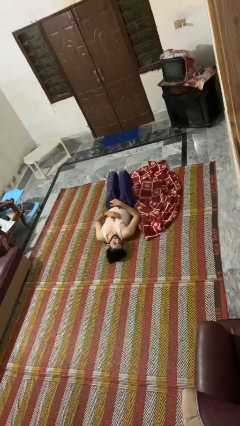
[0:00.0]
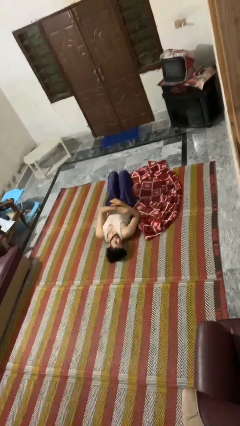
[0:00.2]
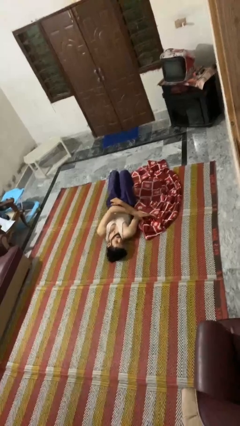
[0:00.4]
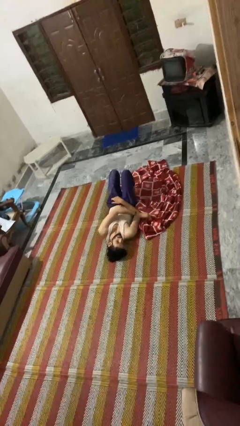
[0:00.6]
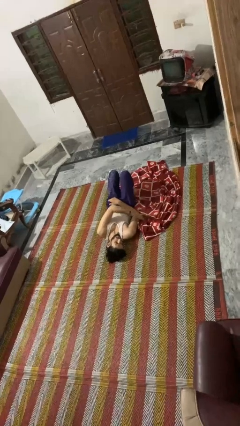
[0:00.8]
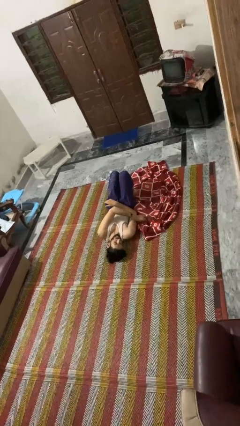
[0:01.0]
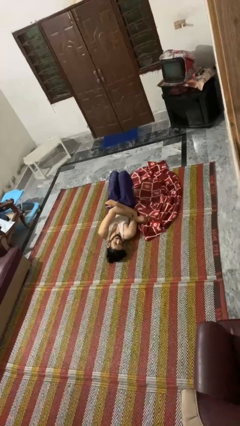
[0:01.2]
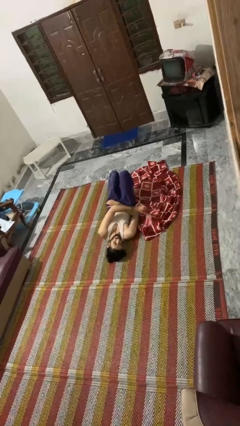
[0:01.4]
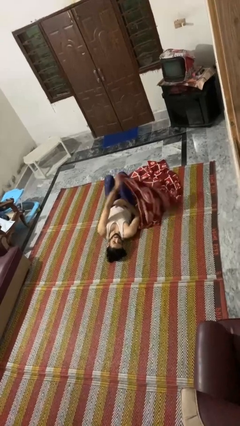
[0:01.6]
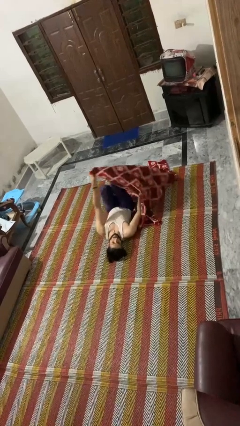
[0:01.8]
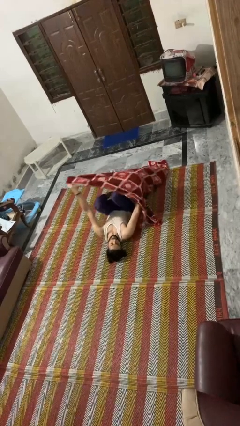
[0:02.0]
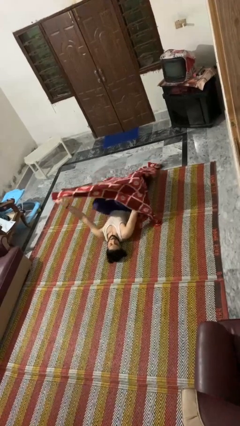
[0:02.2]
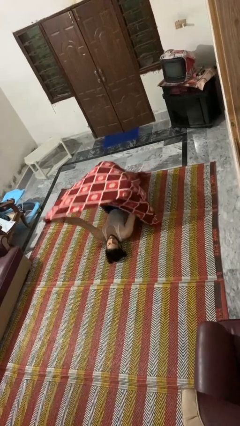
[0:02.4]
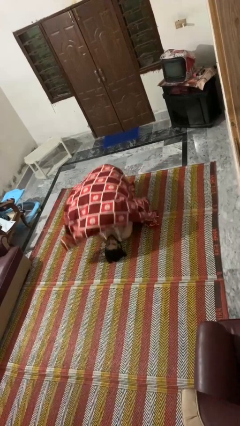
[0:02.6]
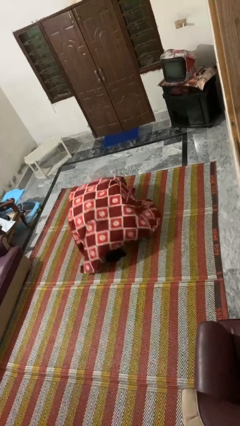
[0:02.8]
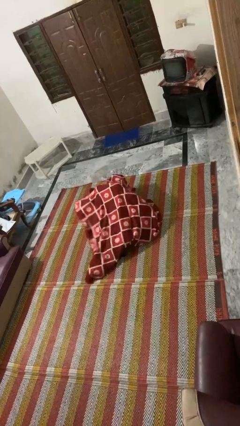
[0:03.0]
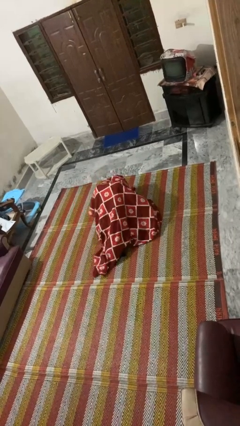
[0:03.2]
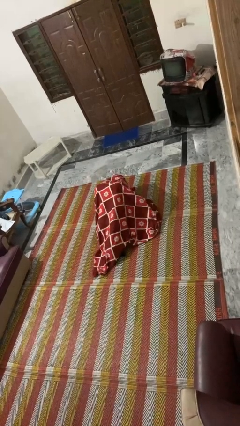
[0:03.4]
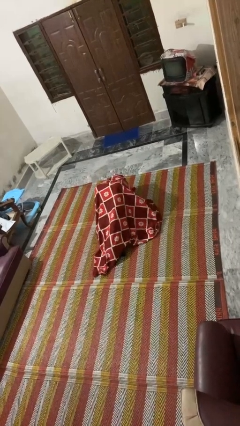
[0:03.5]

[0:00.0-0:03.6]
person covers with blanket

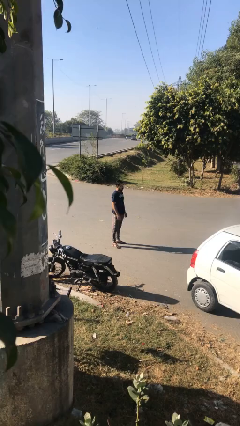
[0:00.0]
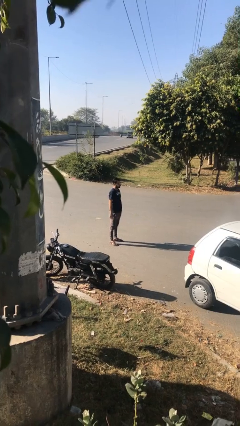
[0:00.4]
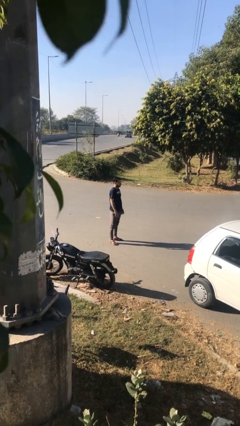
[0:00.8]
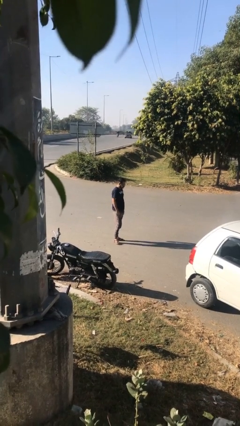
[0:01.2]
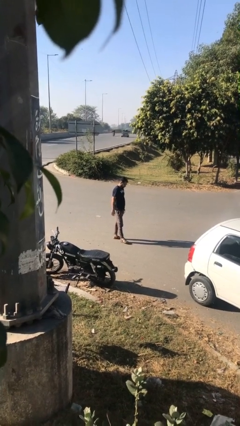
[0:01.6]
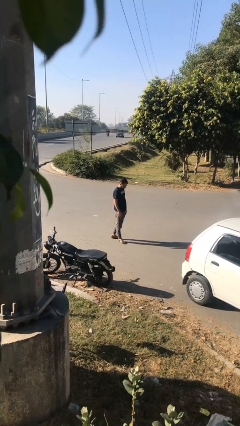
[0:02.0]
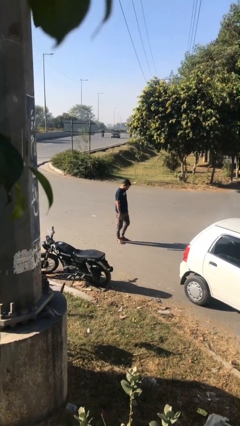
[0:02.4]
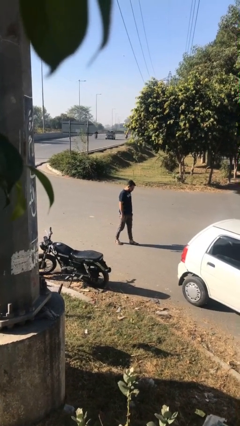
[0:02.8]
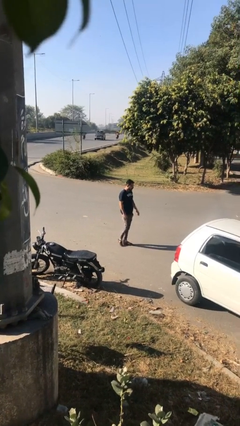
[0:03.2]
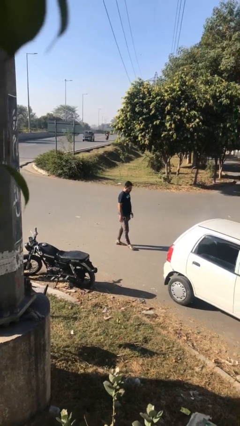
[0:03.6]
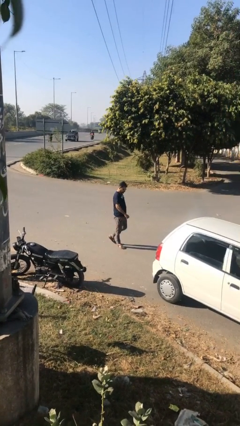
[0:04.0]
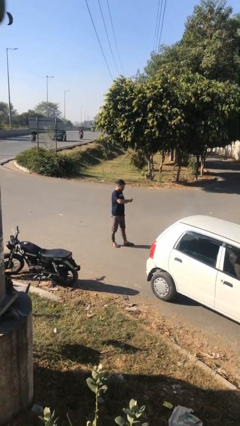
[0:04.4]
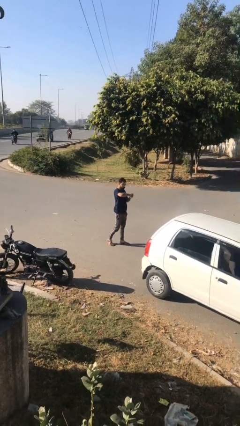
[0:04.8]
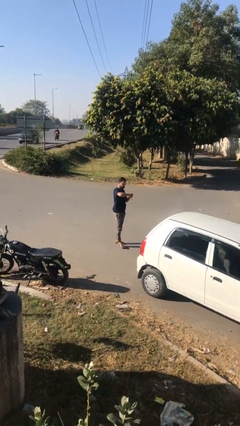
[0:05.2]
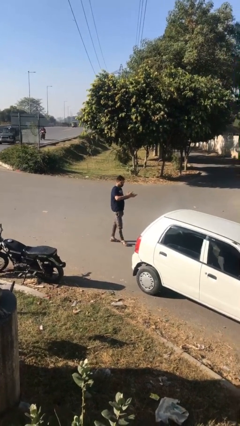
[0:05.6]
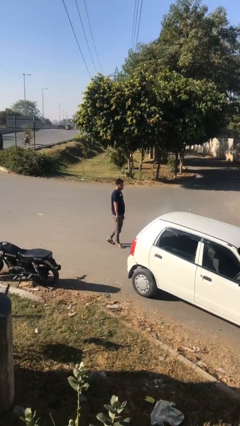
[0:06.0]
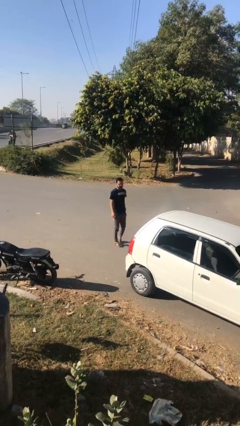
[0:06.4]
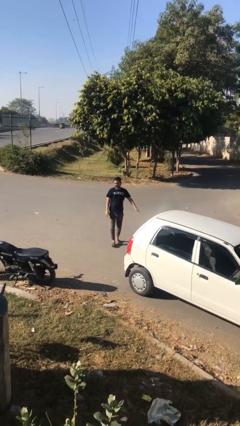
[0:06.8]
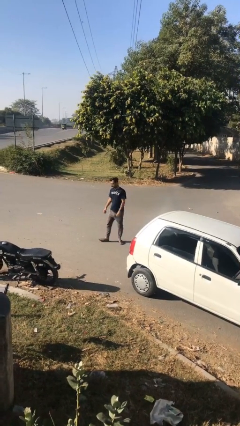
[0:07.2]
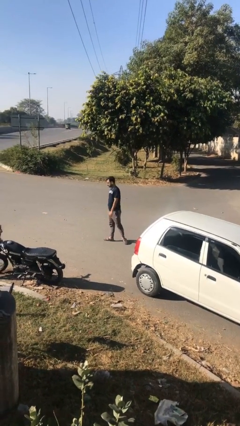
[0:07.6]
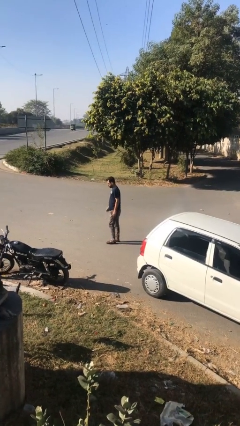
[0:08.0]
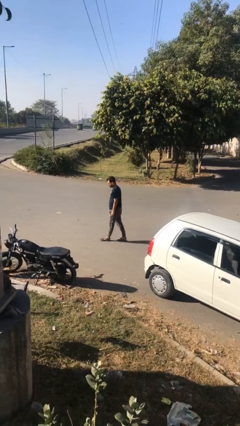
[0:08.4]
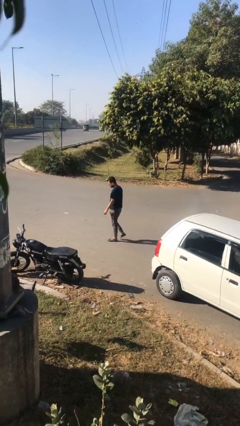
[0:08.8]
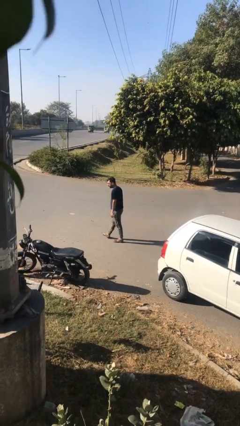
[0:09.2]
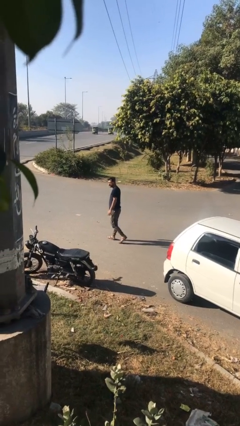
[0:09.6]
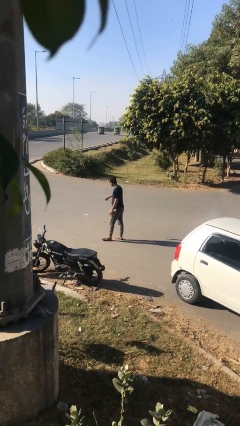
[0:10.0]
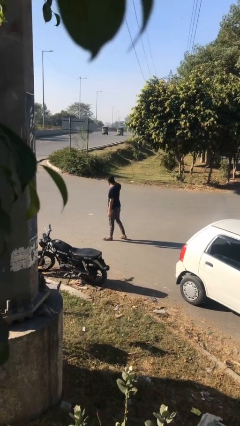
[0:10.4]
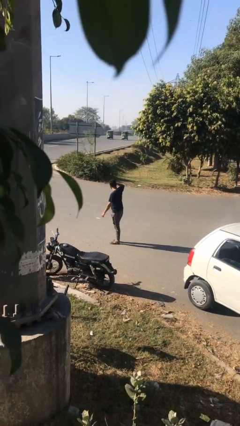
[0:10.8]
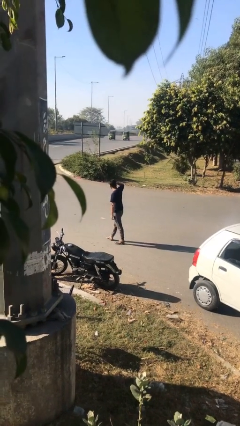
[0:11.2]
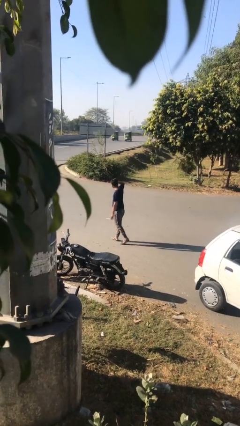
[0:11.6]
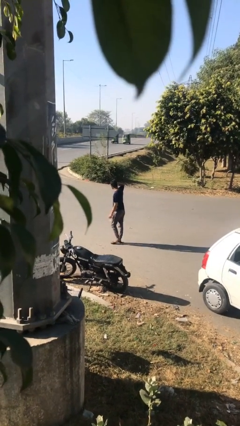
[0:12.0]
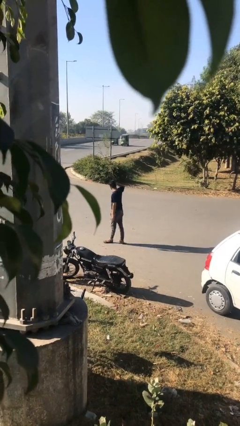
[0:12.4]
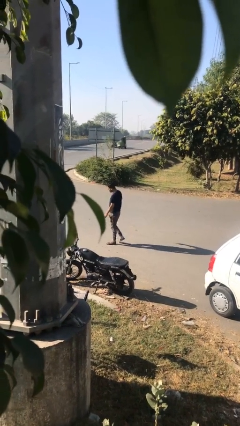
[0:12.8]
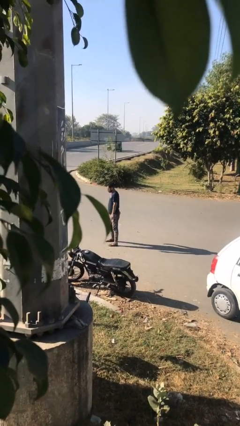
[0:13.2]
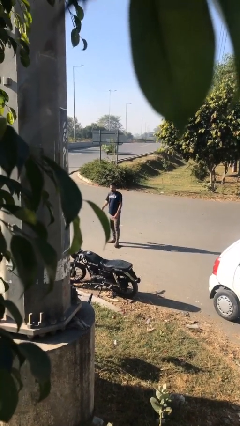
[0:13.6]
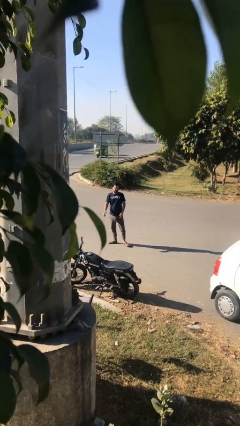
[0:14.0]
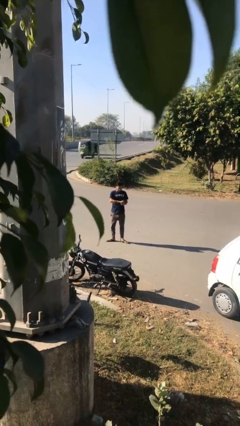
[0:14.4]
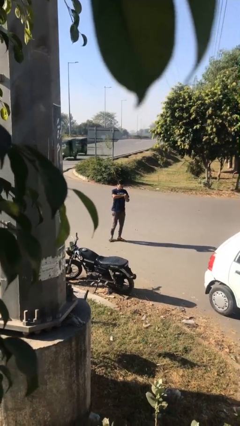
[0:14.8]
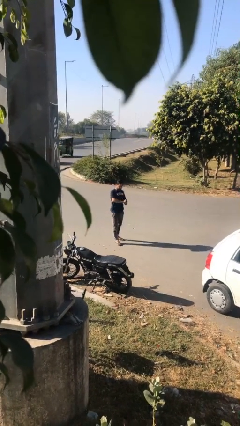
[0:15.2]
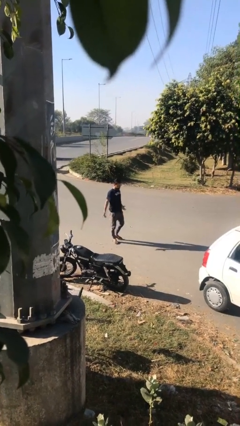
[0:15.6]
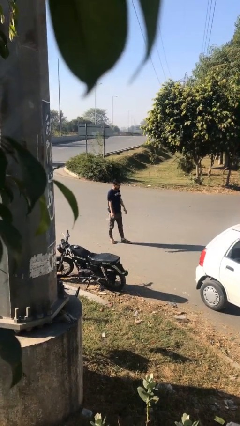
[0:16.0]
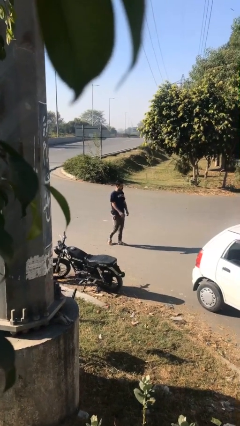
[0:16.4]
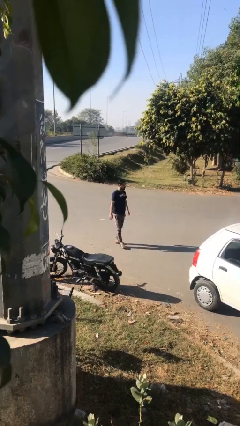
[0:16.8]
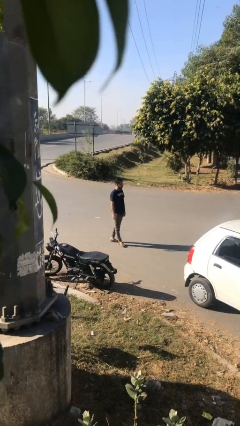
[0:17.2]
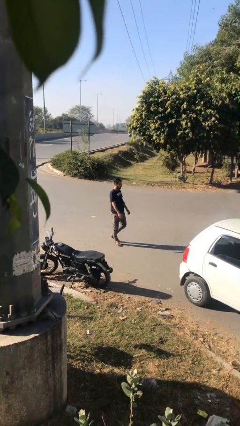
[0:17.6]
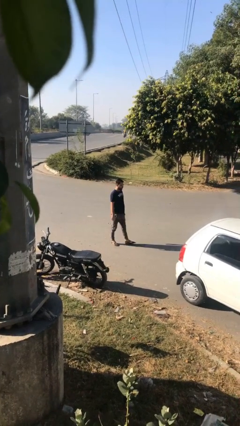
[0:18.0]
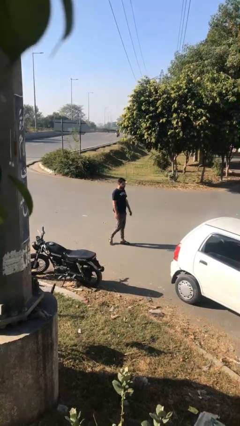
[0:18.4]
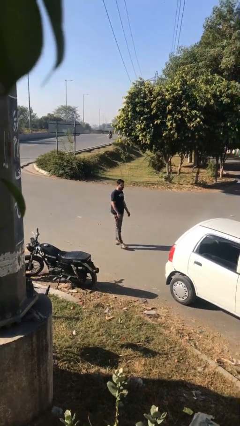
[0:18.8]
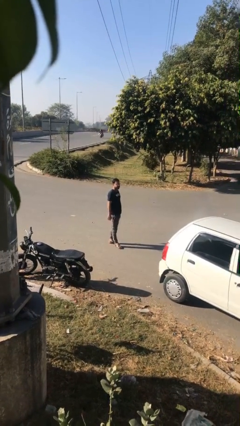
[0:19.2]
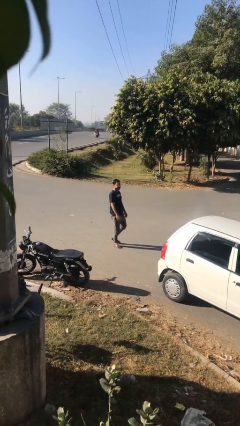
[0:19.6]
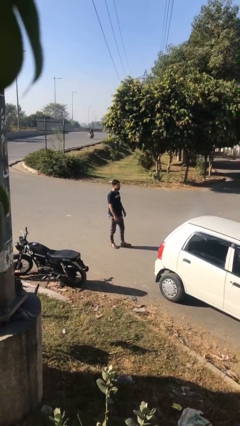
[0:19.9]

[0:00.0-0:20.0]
person walks

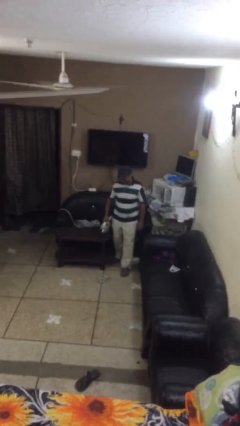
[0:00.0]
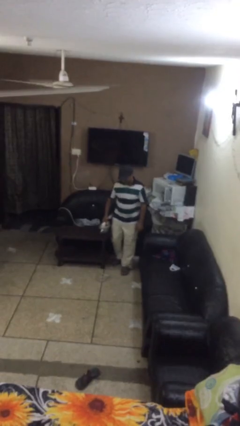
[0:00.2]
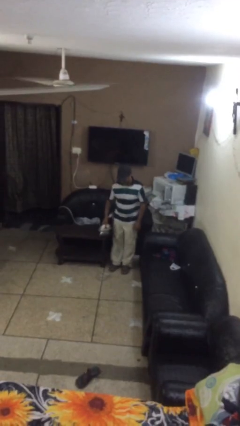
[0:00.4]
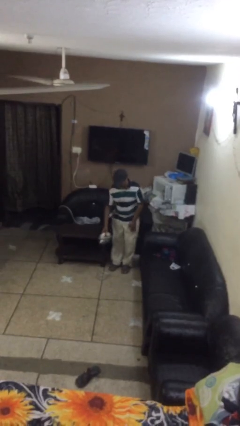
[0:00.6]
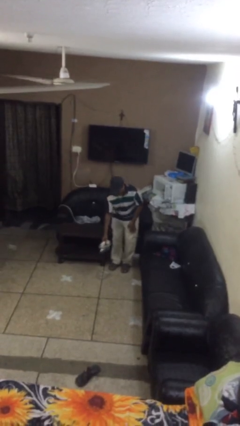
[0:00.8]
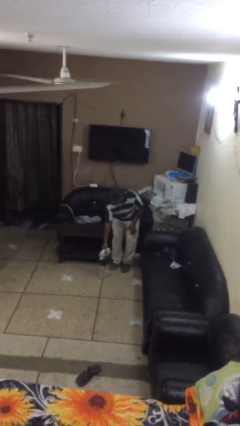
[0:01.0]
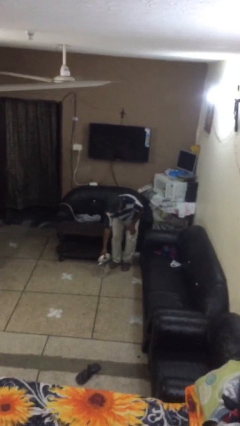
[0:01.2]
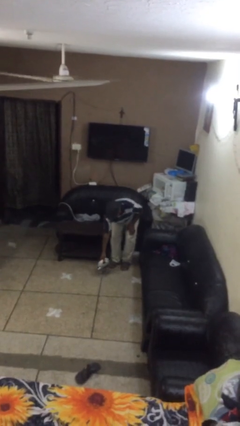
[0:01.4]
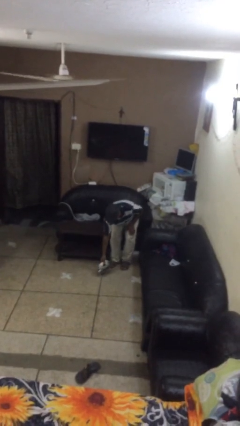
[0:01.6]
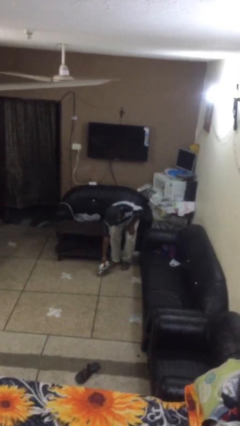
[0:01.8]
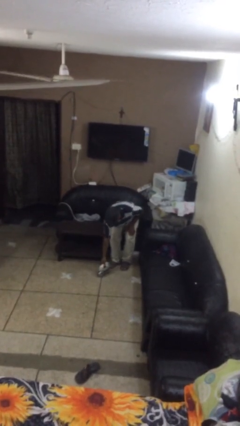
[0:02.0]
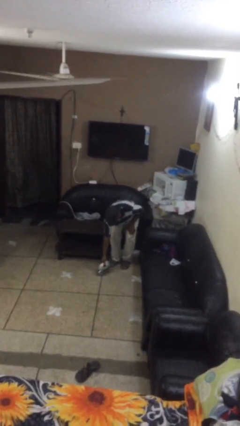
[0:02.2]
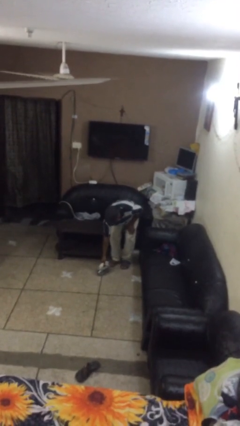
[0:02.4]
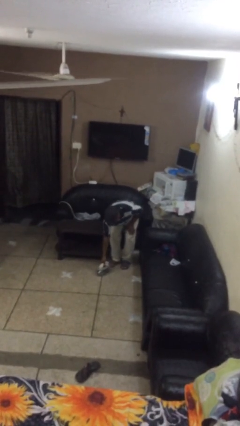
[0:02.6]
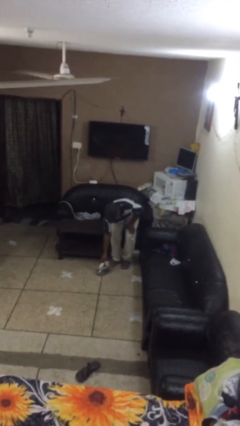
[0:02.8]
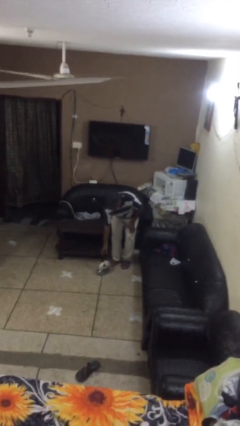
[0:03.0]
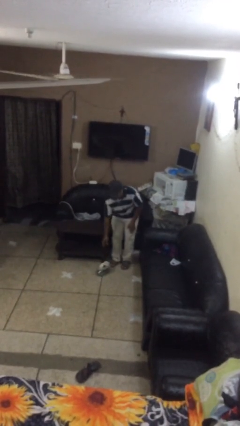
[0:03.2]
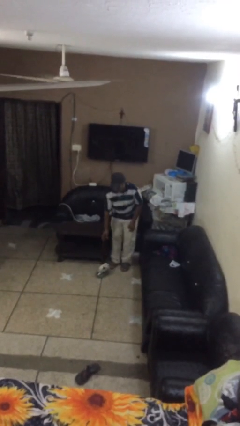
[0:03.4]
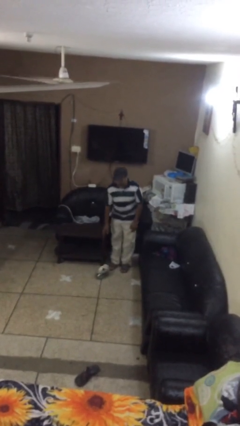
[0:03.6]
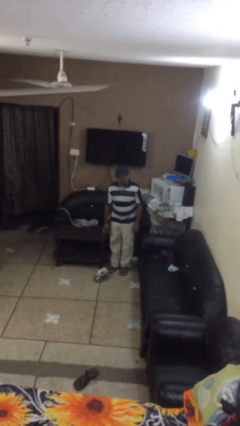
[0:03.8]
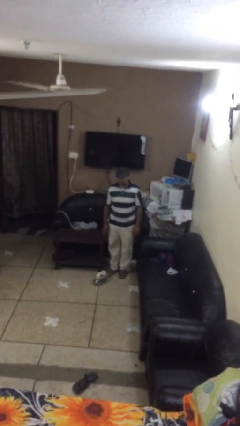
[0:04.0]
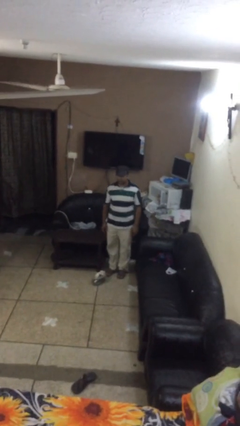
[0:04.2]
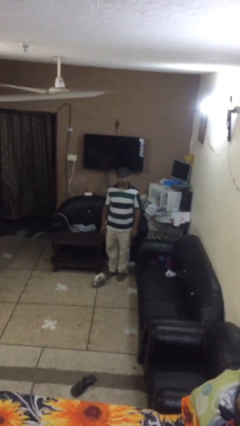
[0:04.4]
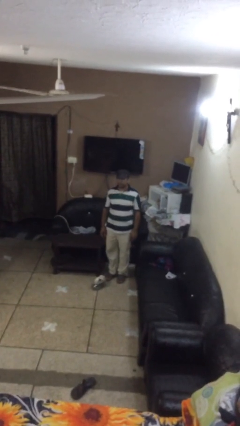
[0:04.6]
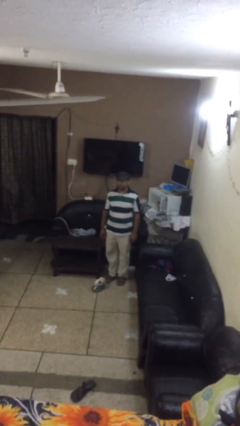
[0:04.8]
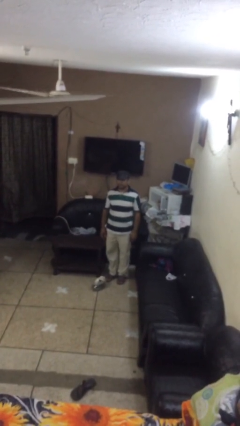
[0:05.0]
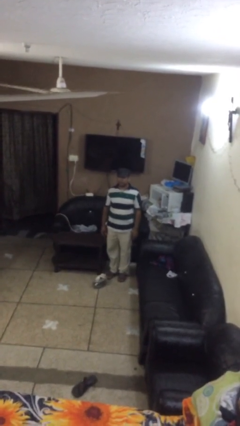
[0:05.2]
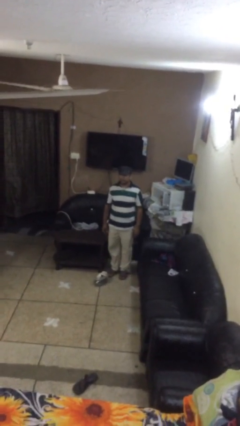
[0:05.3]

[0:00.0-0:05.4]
person puts down object on floor
